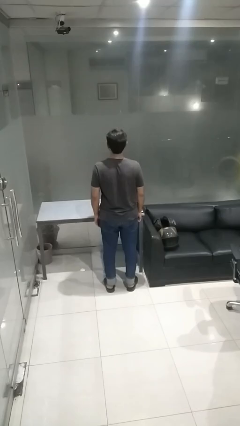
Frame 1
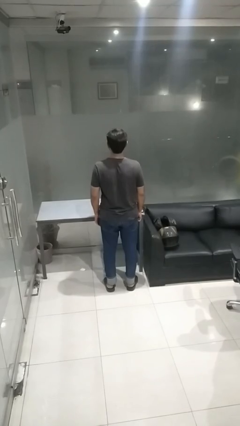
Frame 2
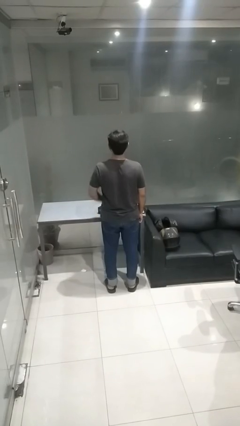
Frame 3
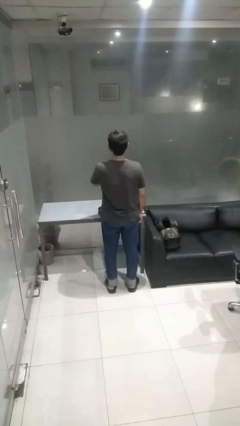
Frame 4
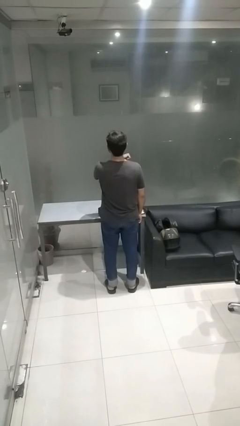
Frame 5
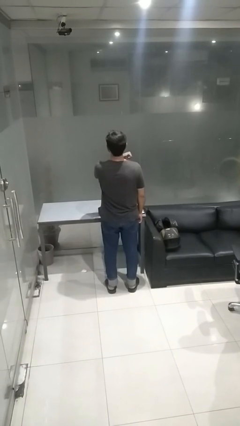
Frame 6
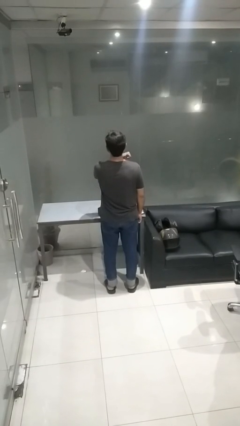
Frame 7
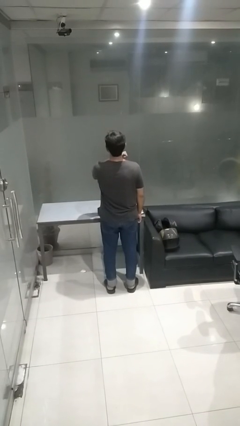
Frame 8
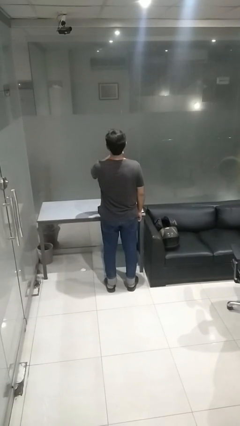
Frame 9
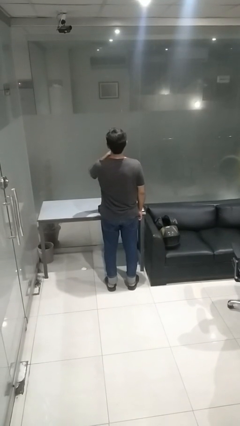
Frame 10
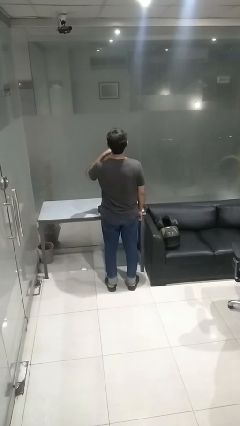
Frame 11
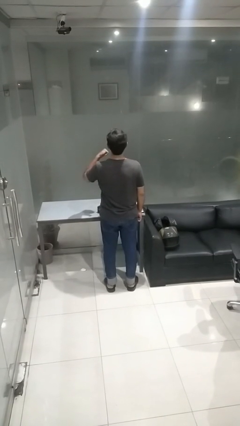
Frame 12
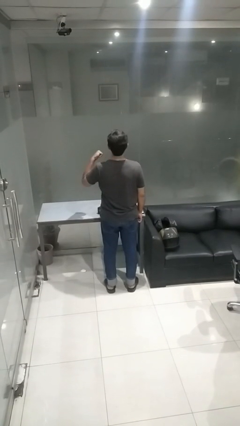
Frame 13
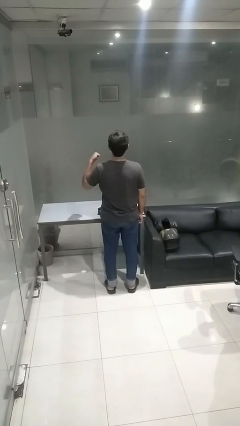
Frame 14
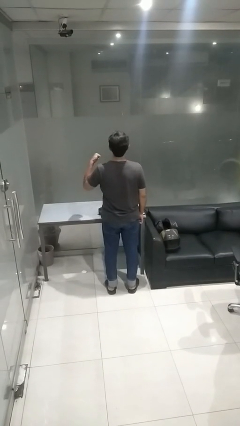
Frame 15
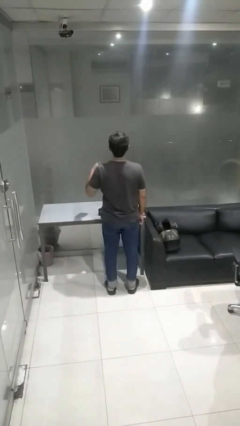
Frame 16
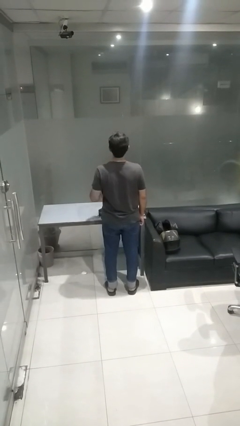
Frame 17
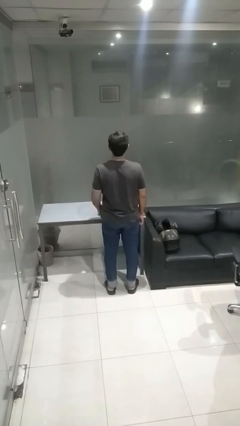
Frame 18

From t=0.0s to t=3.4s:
person gestures cut

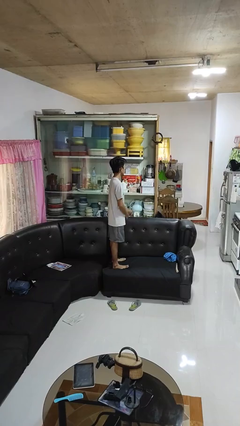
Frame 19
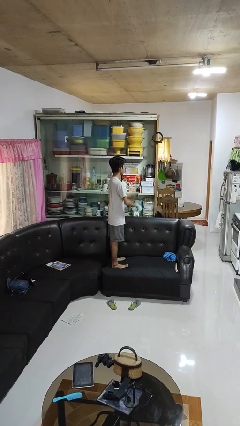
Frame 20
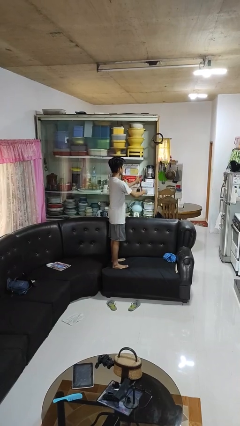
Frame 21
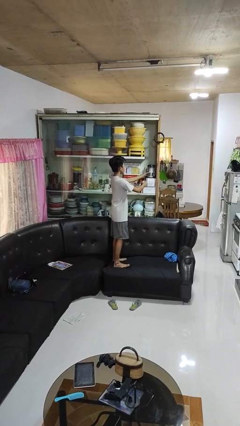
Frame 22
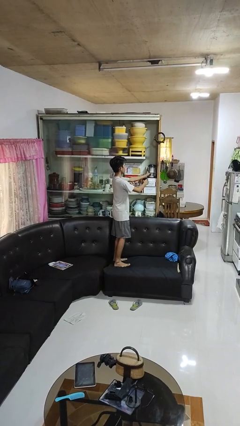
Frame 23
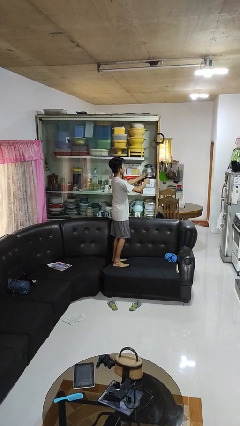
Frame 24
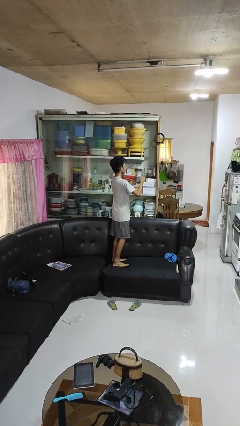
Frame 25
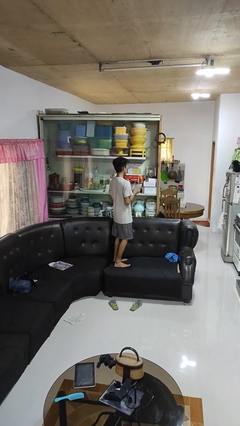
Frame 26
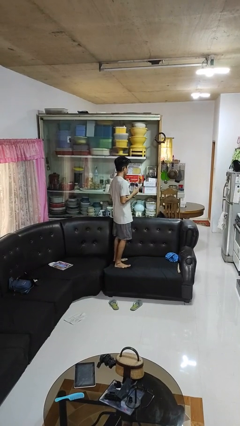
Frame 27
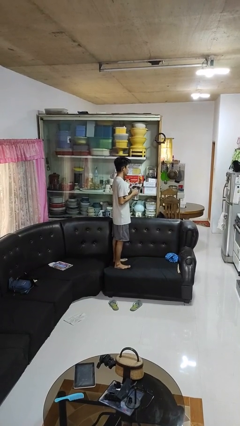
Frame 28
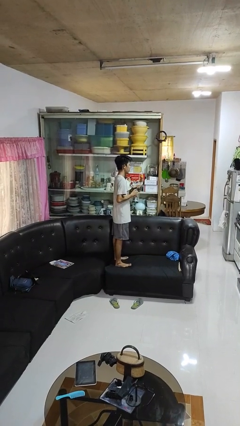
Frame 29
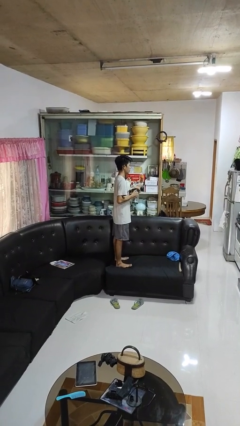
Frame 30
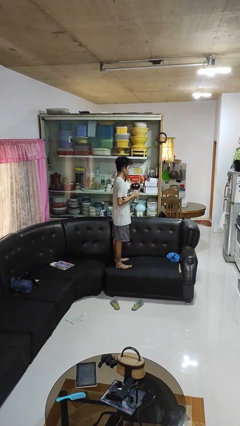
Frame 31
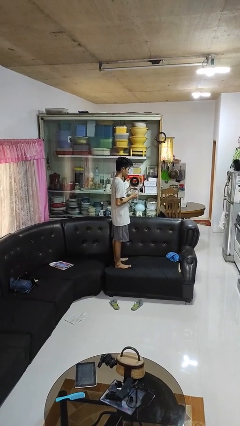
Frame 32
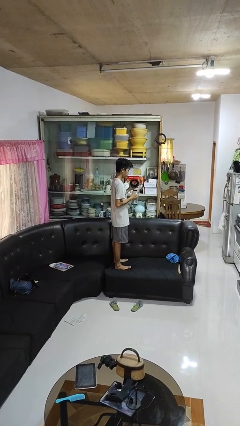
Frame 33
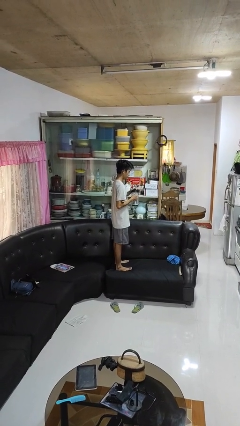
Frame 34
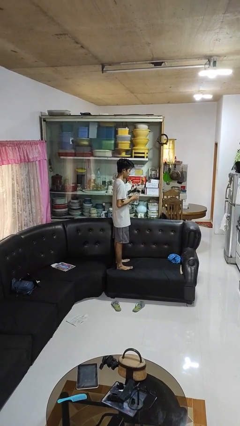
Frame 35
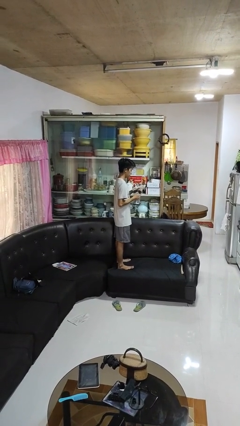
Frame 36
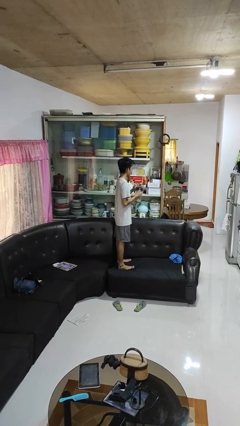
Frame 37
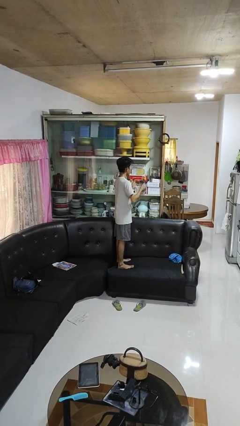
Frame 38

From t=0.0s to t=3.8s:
person picks up object from cabinet

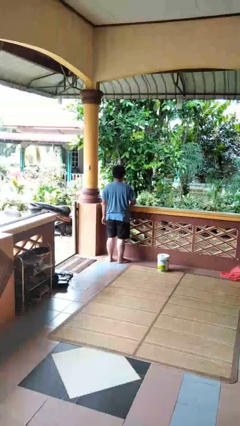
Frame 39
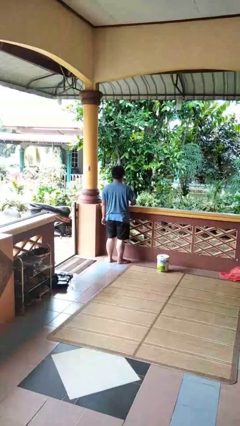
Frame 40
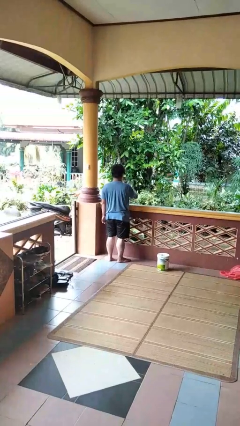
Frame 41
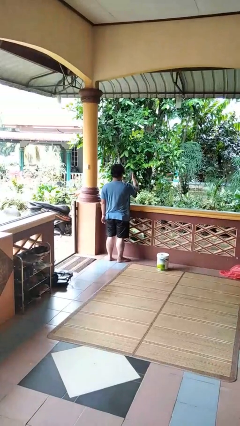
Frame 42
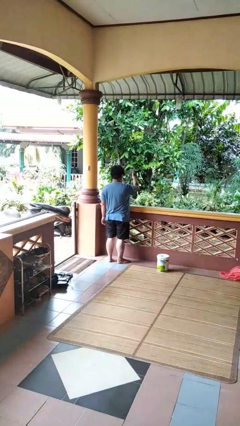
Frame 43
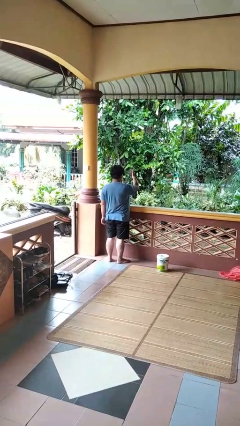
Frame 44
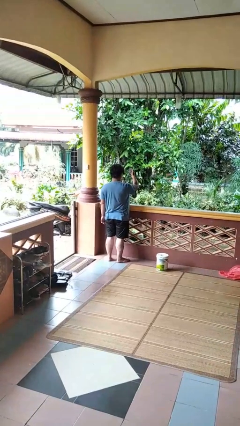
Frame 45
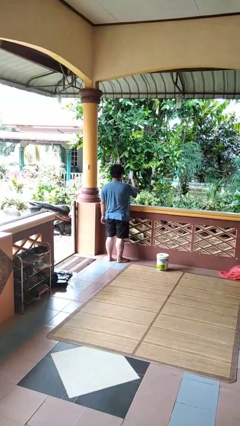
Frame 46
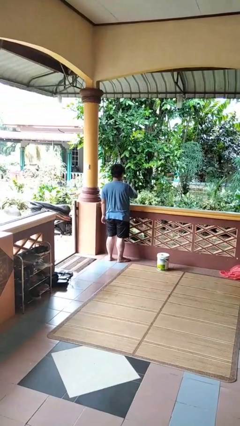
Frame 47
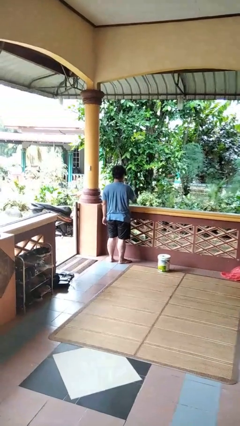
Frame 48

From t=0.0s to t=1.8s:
person takes selfie

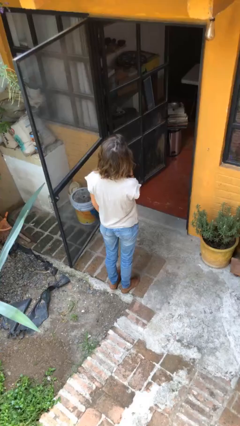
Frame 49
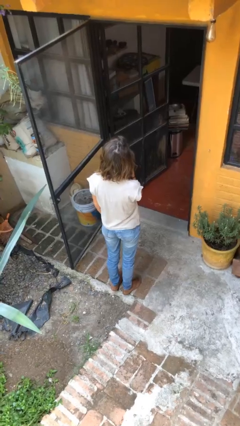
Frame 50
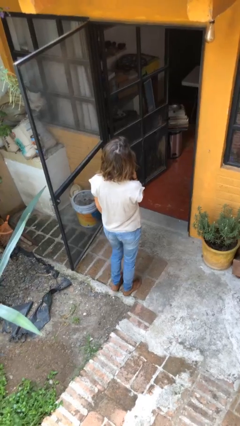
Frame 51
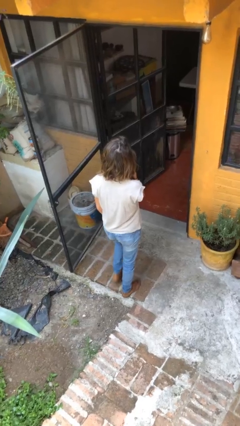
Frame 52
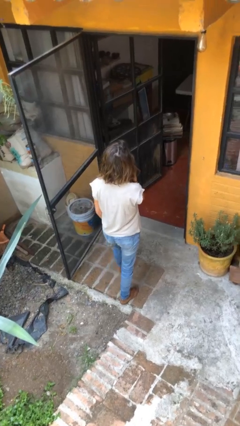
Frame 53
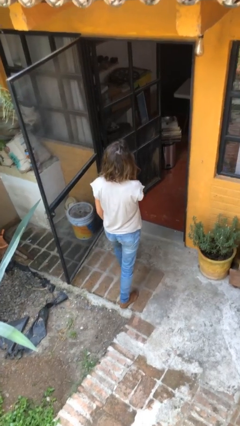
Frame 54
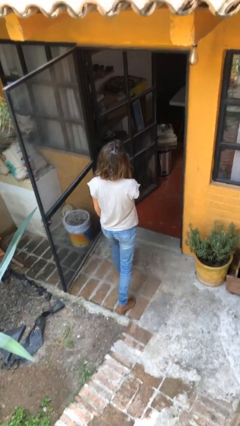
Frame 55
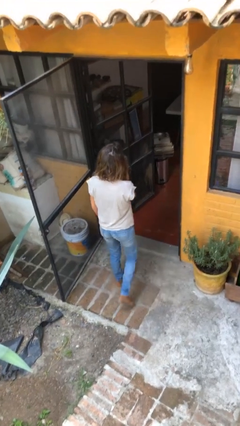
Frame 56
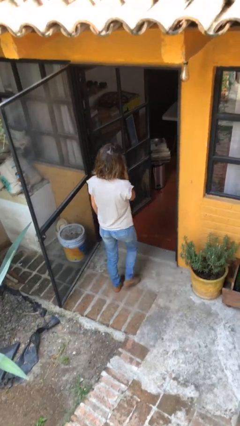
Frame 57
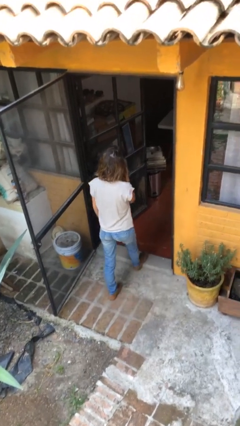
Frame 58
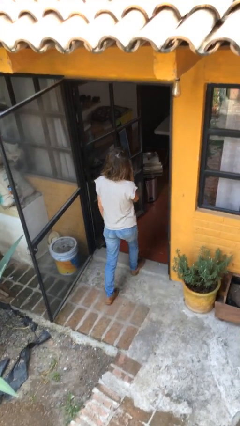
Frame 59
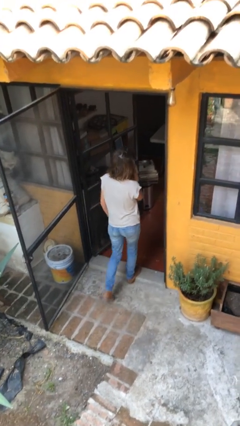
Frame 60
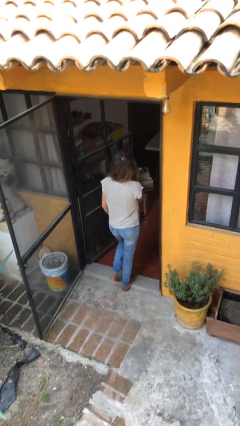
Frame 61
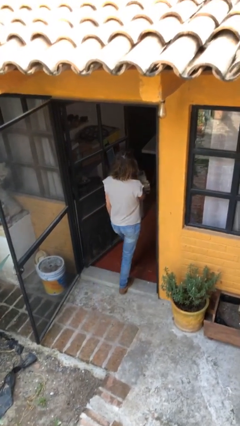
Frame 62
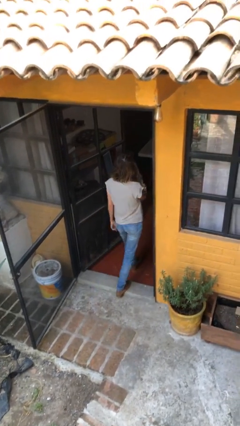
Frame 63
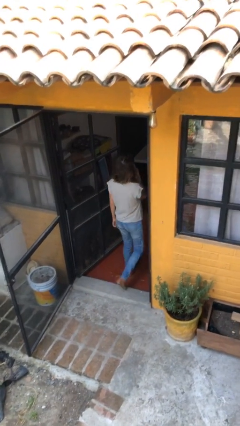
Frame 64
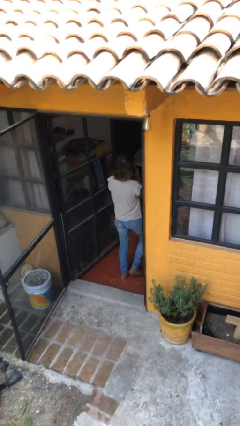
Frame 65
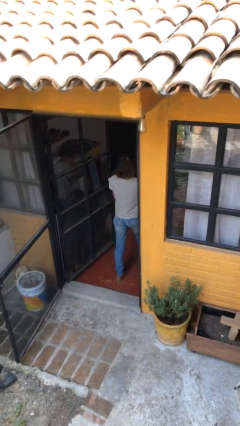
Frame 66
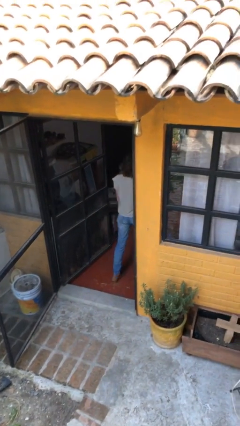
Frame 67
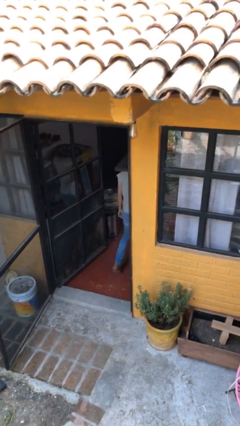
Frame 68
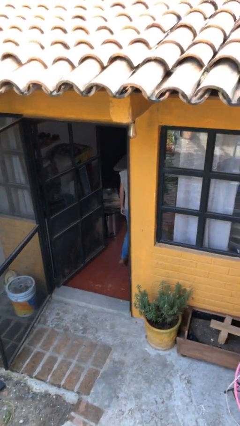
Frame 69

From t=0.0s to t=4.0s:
person exits scene through structure

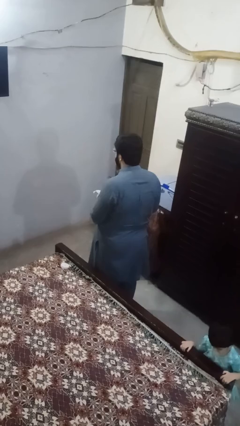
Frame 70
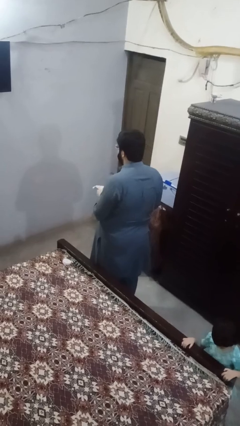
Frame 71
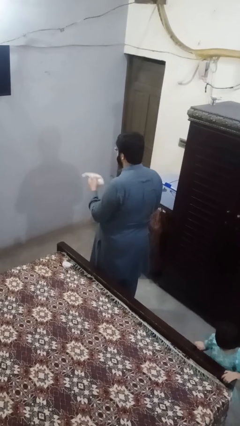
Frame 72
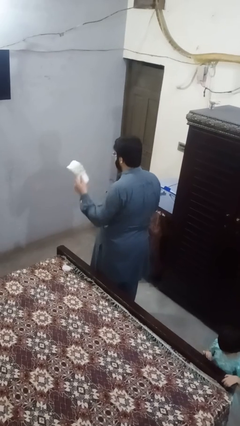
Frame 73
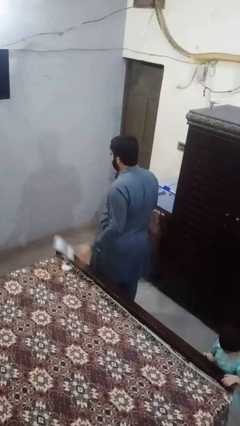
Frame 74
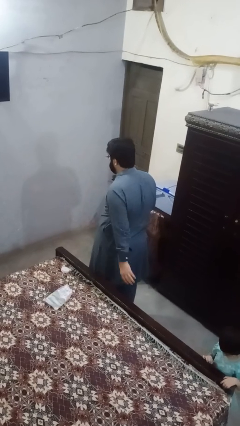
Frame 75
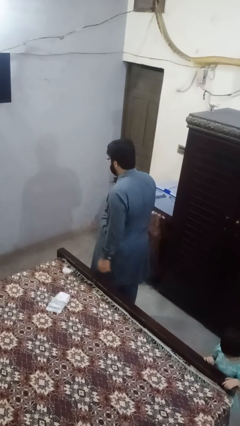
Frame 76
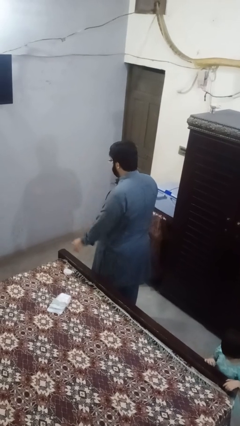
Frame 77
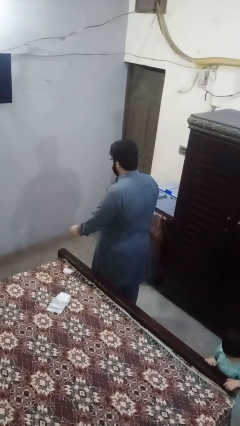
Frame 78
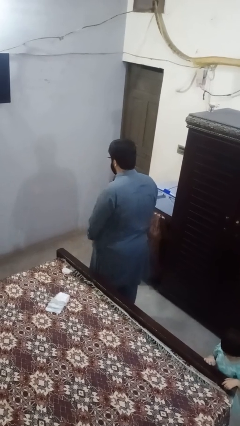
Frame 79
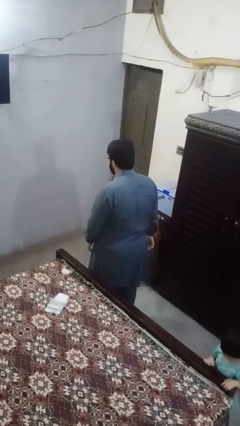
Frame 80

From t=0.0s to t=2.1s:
person throws object on bed

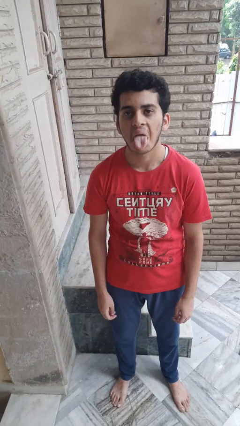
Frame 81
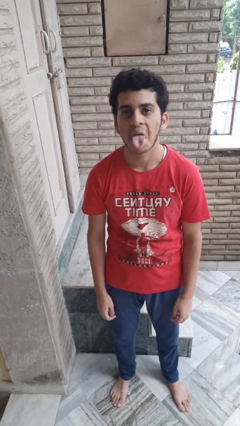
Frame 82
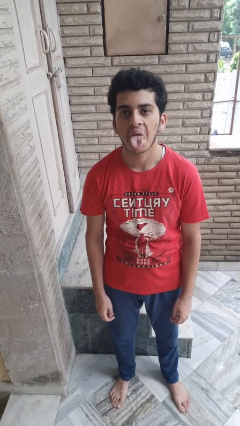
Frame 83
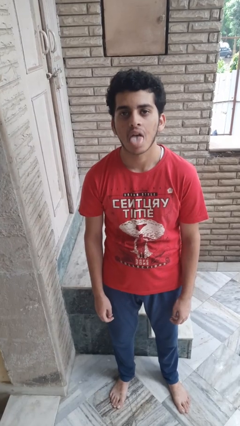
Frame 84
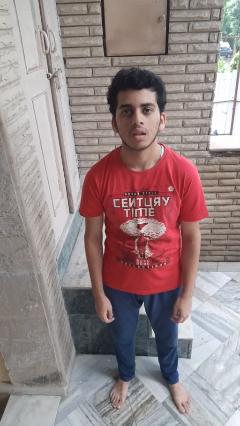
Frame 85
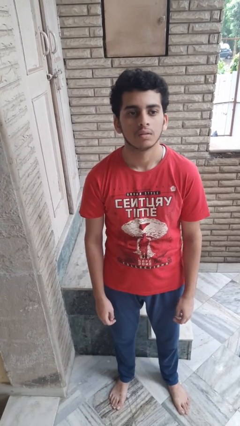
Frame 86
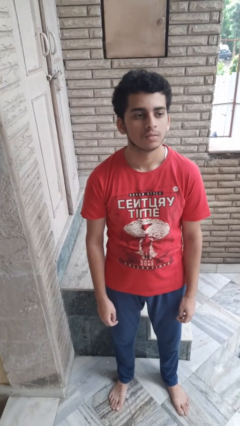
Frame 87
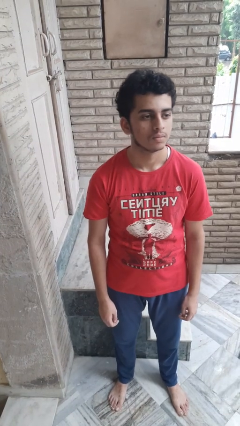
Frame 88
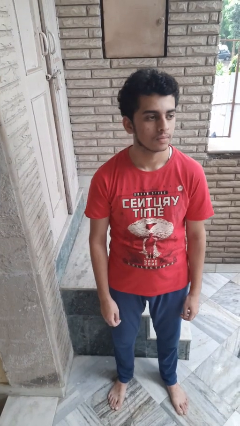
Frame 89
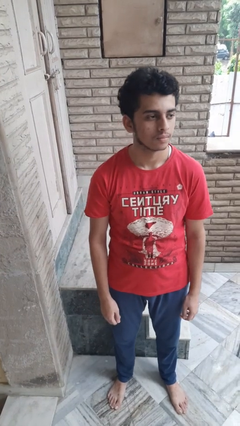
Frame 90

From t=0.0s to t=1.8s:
person sticks out tongue

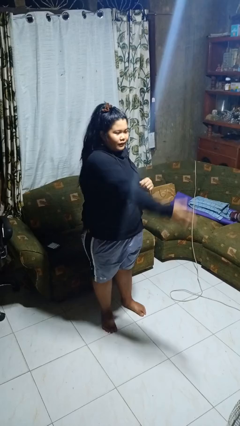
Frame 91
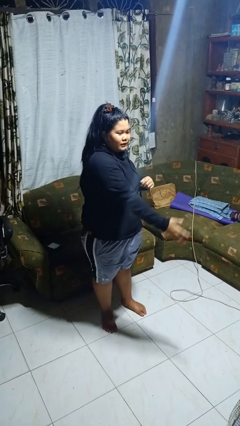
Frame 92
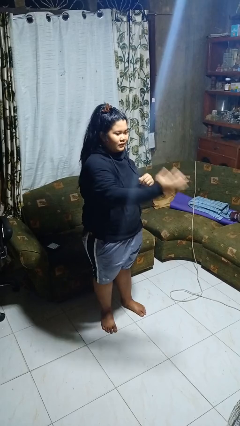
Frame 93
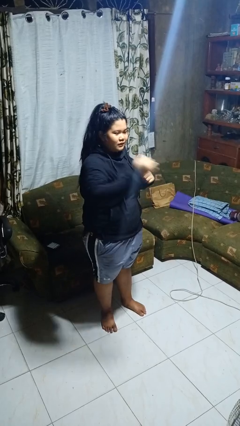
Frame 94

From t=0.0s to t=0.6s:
person karate chop
